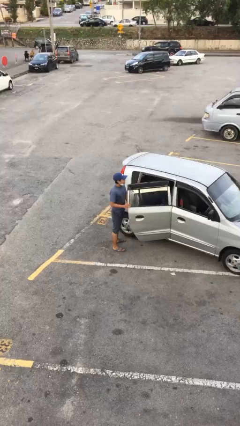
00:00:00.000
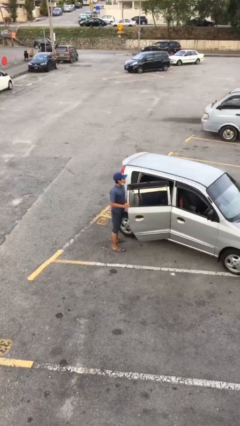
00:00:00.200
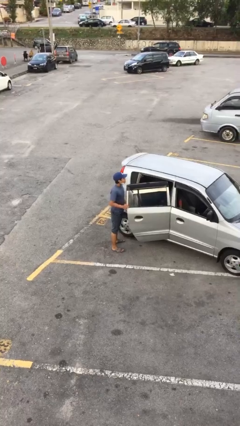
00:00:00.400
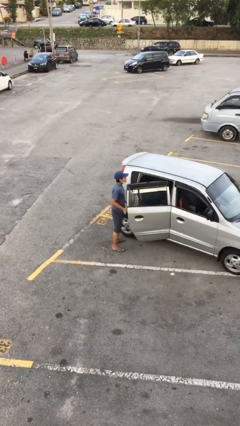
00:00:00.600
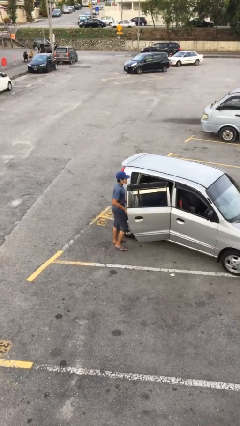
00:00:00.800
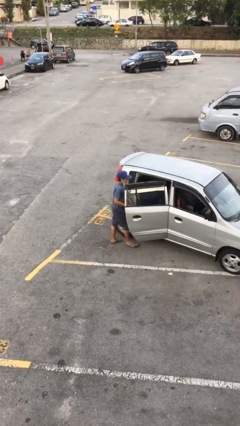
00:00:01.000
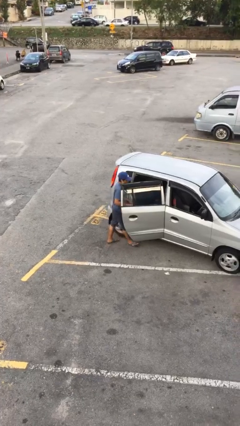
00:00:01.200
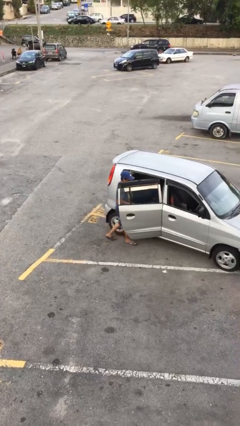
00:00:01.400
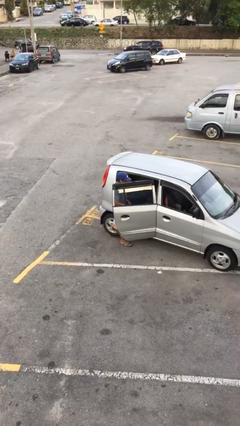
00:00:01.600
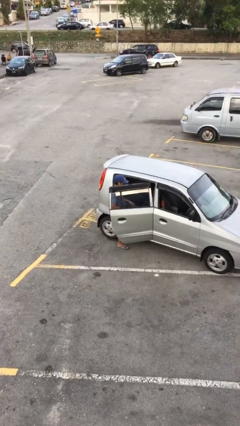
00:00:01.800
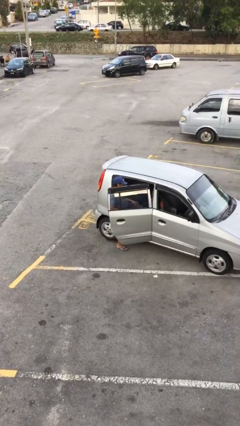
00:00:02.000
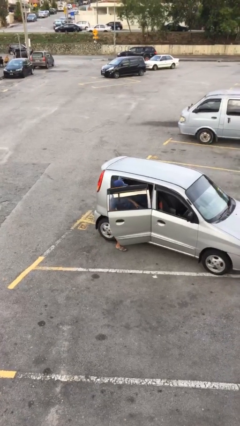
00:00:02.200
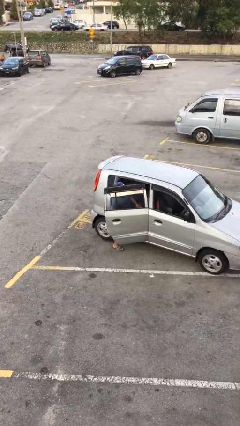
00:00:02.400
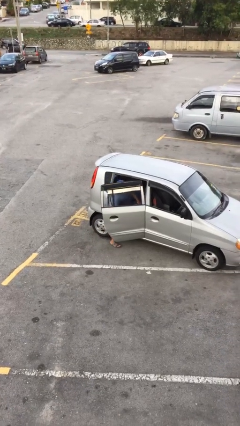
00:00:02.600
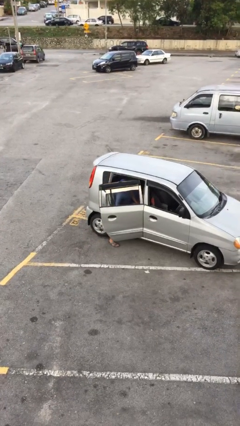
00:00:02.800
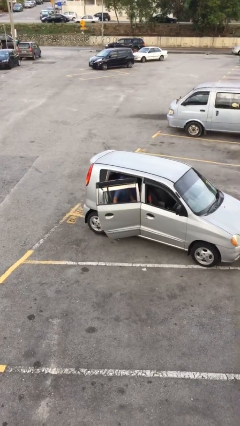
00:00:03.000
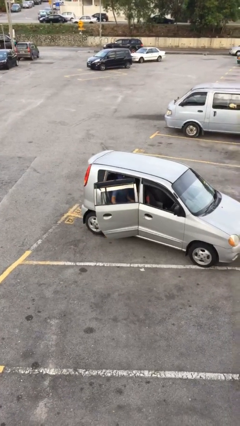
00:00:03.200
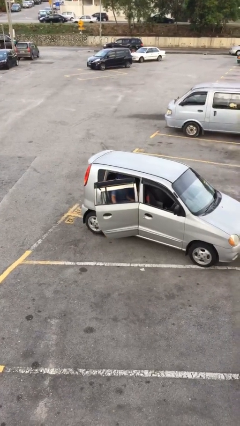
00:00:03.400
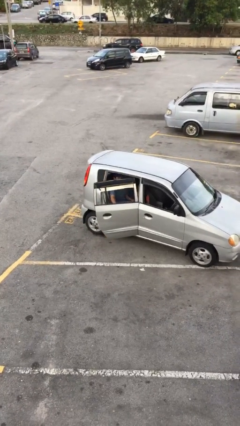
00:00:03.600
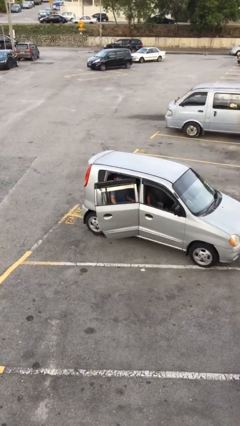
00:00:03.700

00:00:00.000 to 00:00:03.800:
person enters car

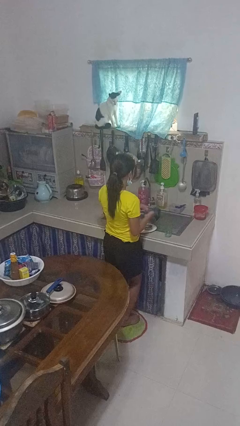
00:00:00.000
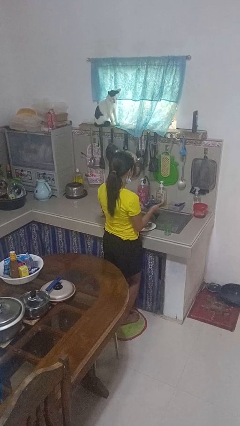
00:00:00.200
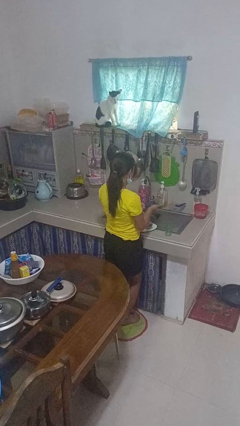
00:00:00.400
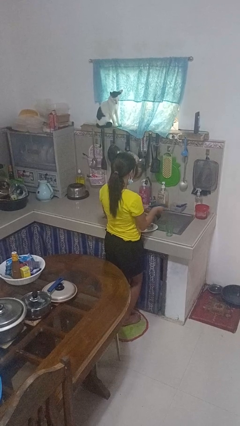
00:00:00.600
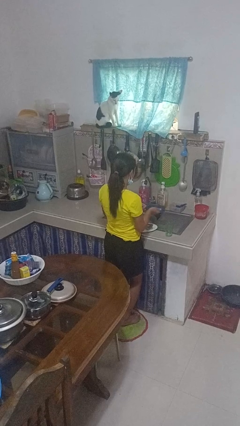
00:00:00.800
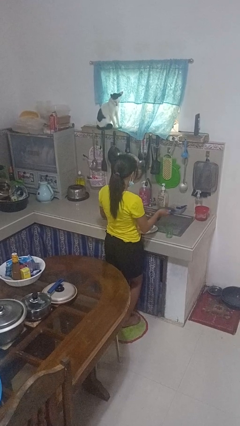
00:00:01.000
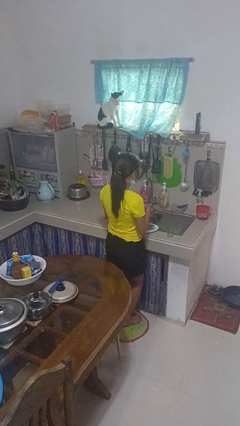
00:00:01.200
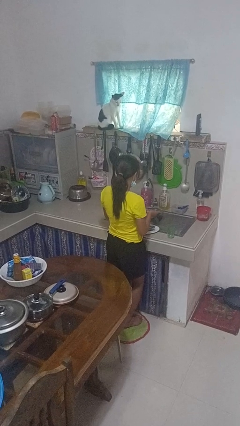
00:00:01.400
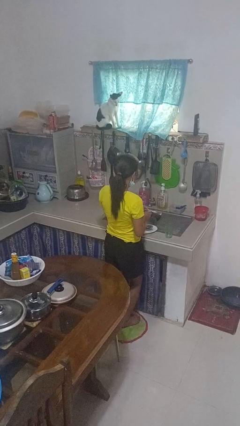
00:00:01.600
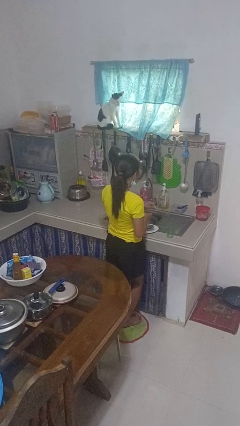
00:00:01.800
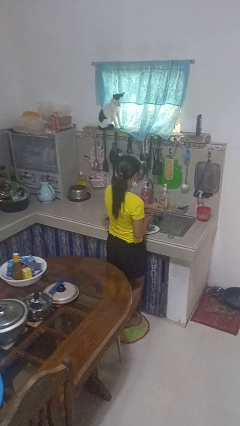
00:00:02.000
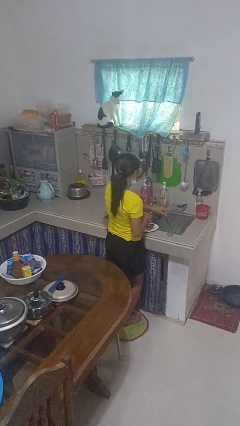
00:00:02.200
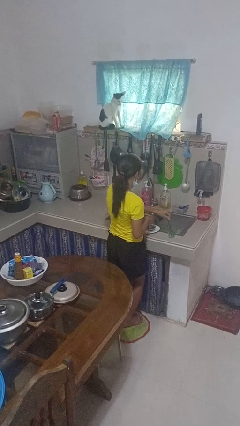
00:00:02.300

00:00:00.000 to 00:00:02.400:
person dries dish

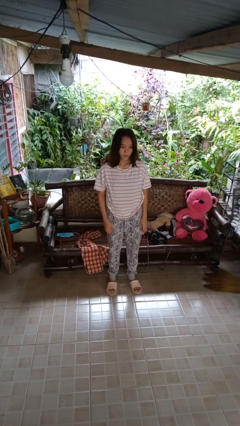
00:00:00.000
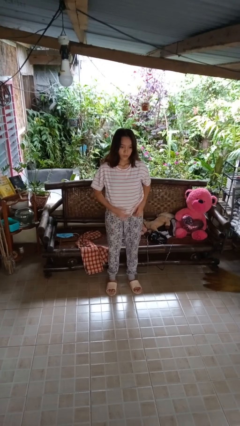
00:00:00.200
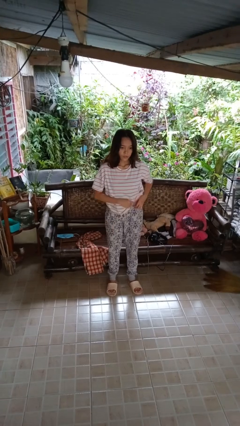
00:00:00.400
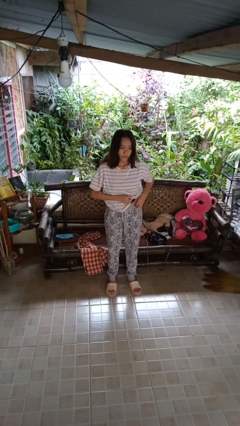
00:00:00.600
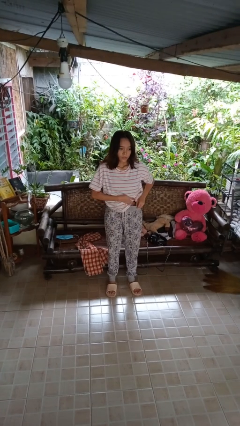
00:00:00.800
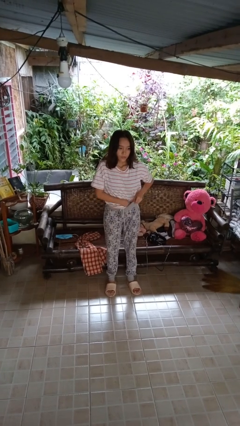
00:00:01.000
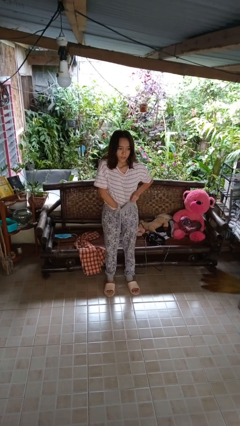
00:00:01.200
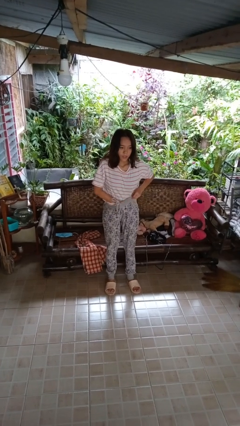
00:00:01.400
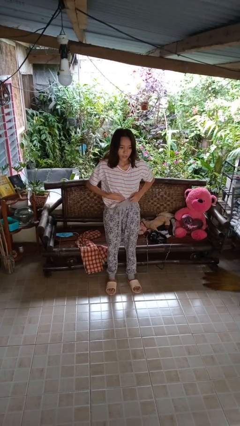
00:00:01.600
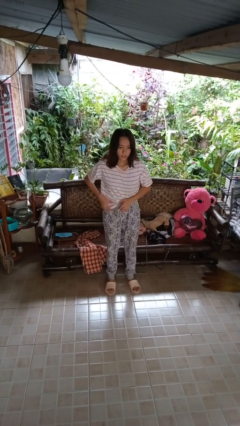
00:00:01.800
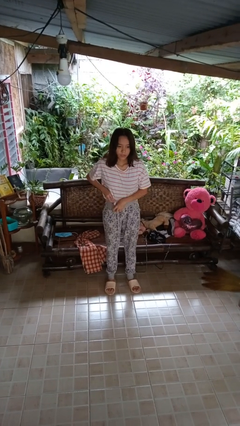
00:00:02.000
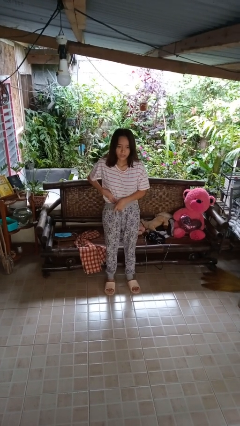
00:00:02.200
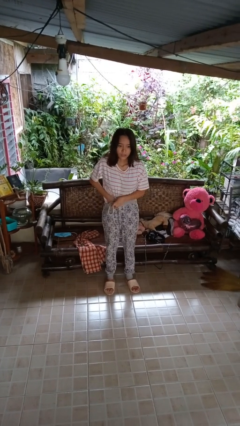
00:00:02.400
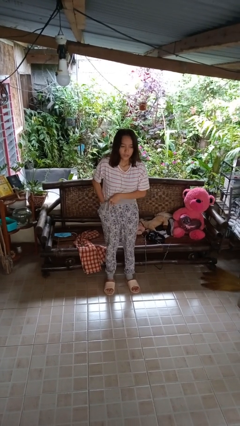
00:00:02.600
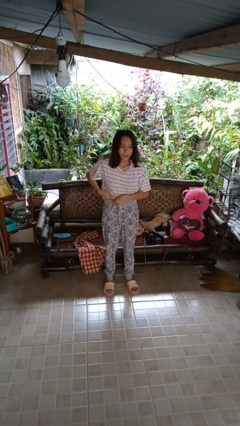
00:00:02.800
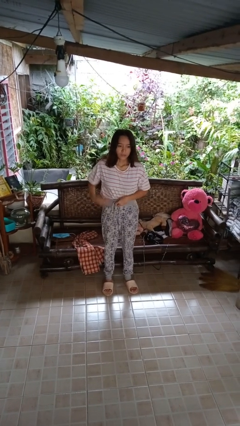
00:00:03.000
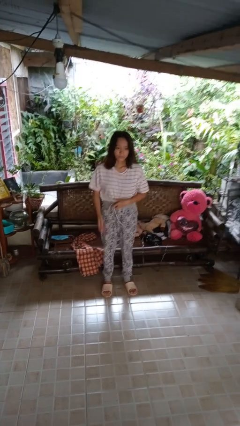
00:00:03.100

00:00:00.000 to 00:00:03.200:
person tucks in shirt

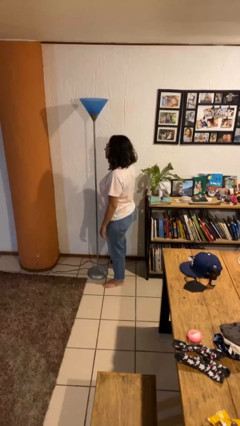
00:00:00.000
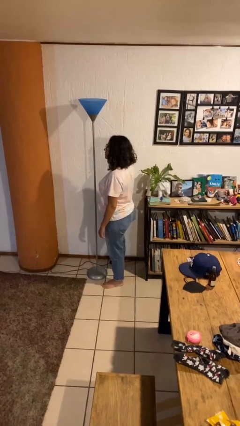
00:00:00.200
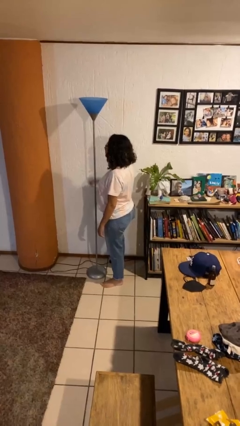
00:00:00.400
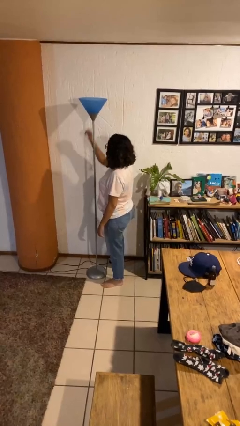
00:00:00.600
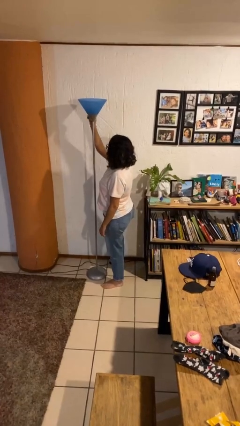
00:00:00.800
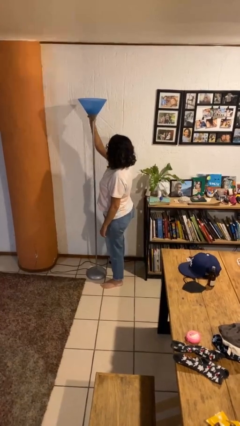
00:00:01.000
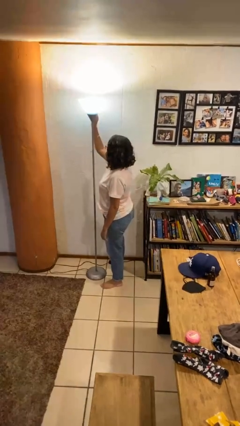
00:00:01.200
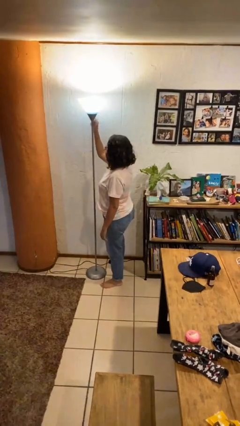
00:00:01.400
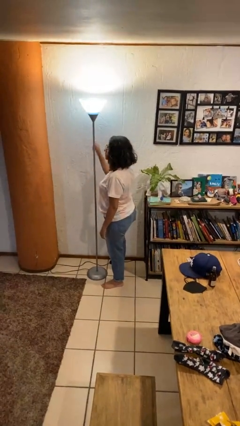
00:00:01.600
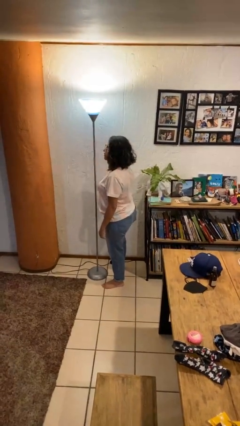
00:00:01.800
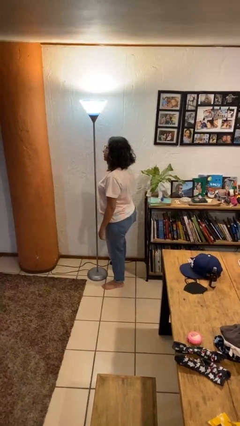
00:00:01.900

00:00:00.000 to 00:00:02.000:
person turns on lamp

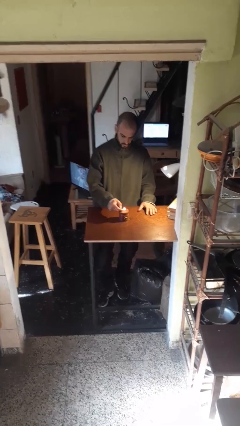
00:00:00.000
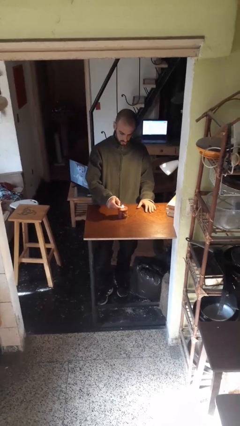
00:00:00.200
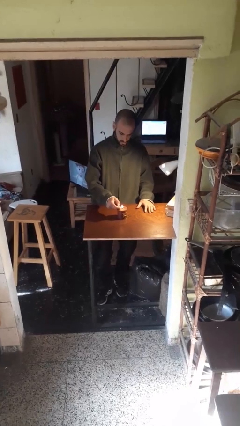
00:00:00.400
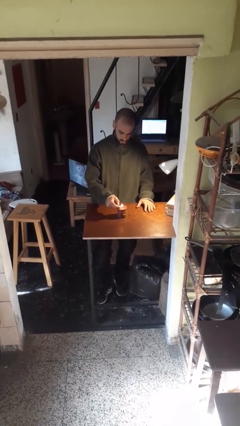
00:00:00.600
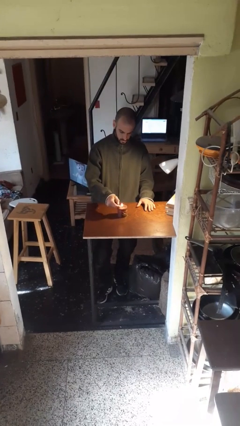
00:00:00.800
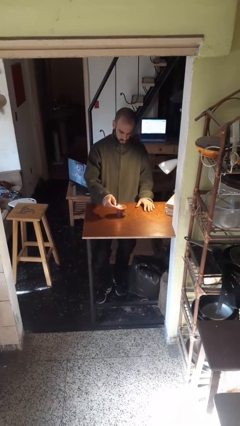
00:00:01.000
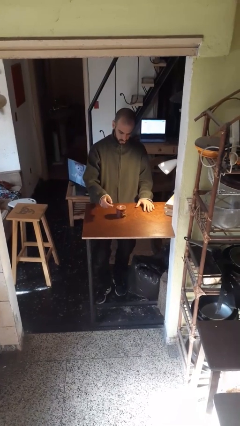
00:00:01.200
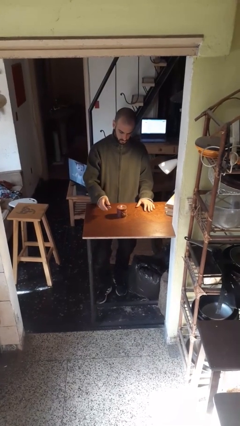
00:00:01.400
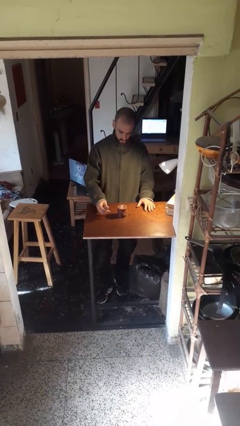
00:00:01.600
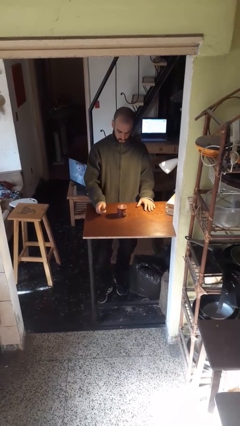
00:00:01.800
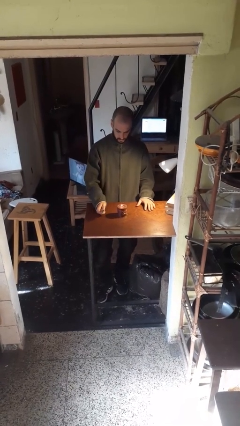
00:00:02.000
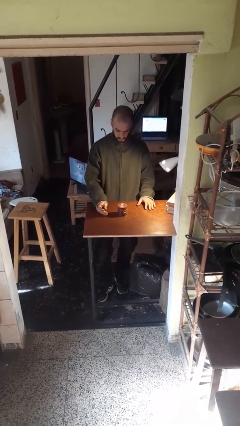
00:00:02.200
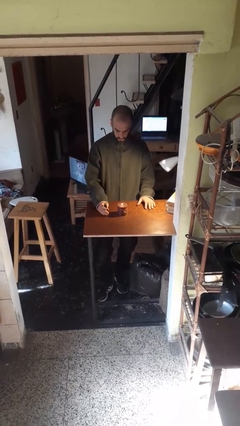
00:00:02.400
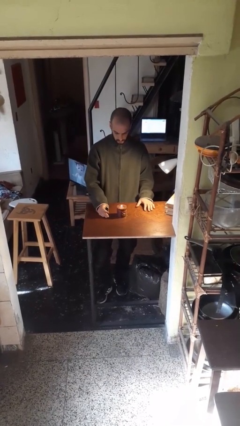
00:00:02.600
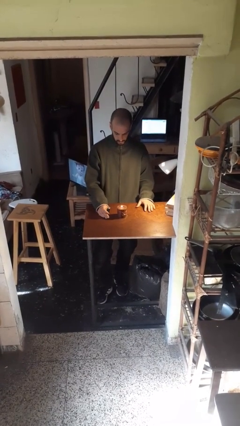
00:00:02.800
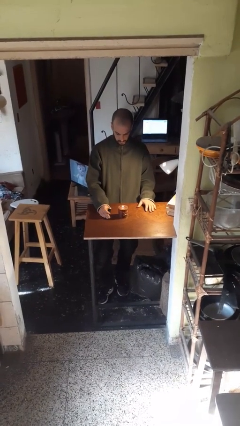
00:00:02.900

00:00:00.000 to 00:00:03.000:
person lights candle

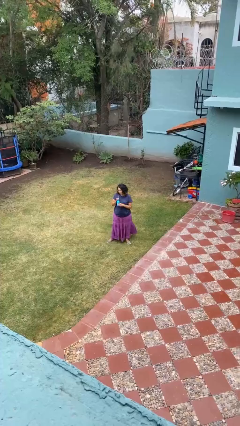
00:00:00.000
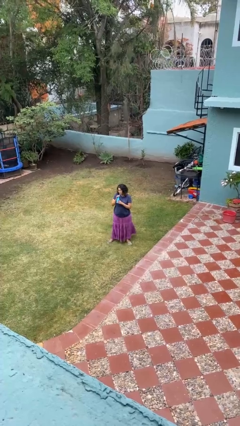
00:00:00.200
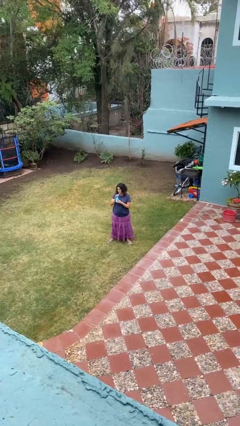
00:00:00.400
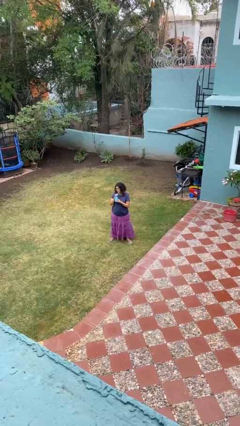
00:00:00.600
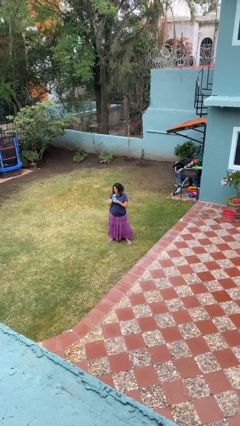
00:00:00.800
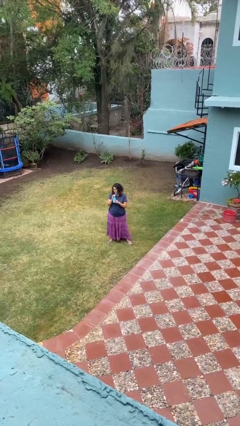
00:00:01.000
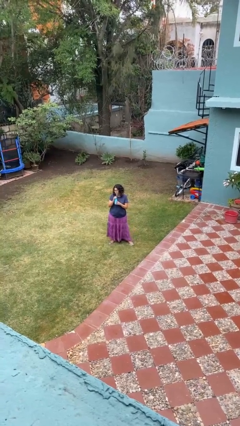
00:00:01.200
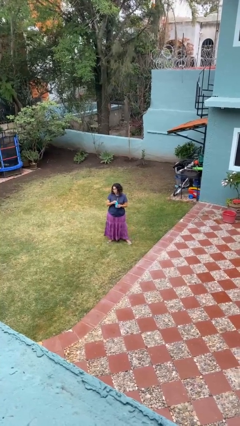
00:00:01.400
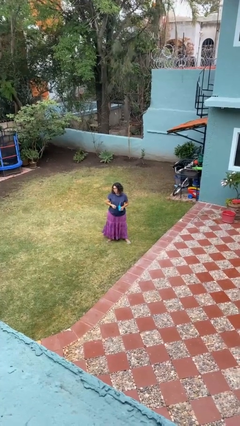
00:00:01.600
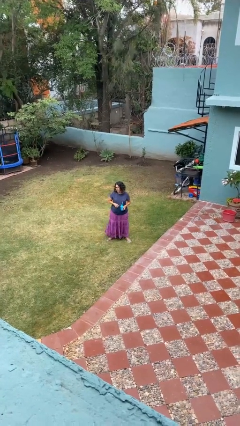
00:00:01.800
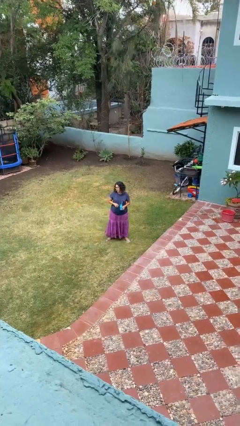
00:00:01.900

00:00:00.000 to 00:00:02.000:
person drinks from straw

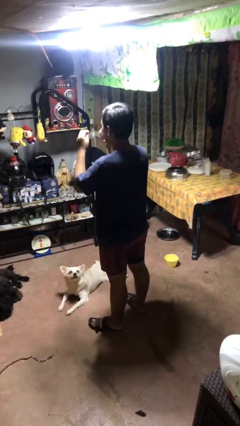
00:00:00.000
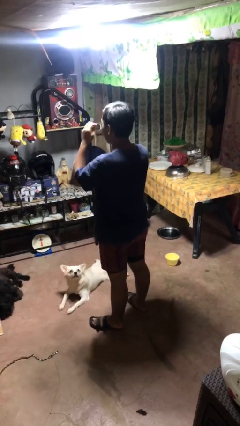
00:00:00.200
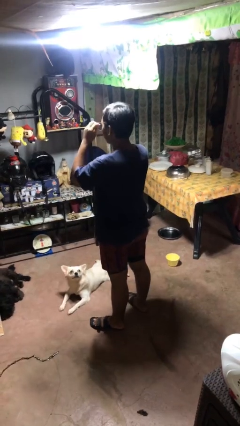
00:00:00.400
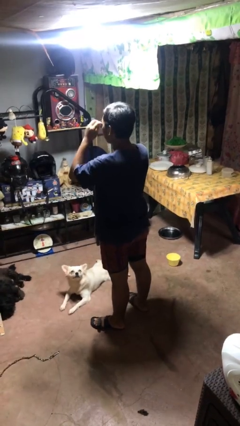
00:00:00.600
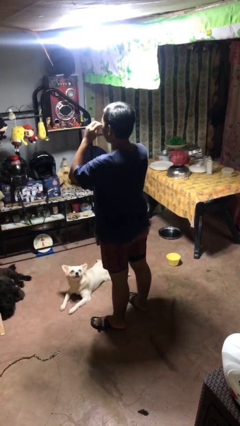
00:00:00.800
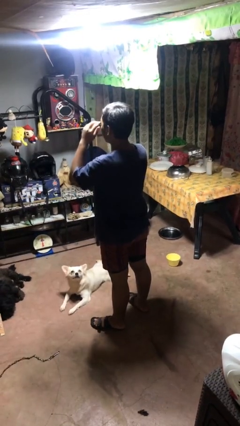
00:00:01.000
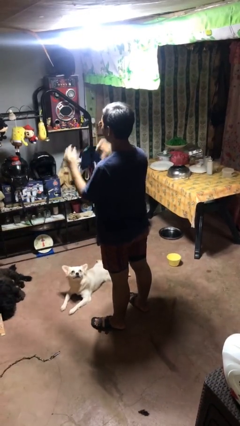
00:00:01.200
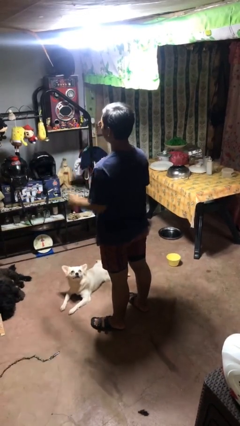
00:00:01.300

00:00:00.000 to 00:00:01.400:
person puts on sunglasses
